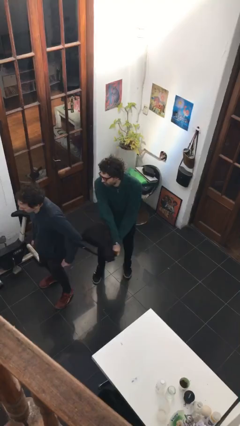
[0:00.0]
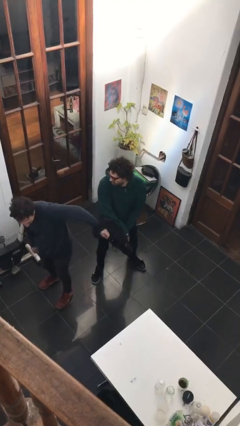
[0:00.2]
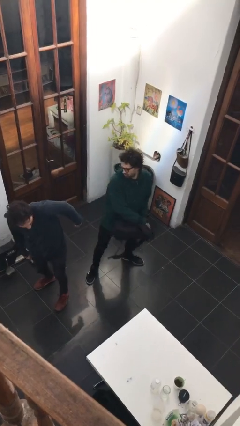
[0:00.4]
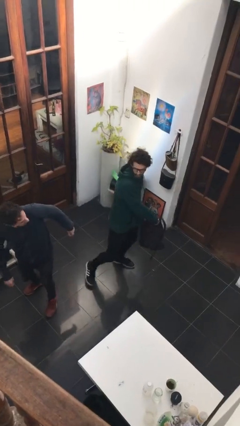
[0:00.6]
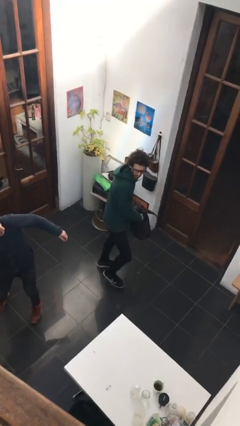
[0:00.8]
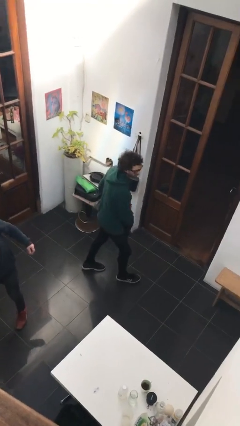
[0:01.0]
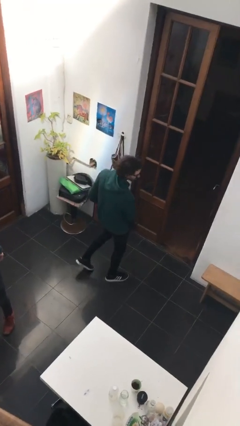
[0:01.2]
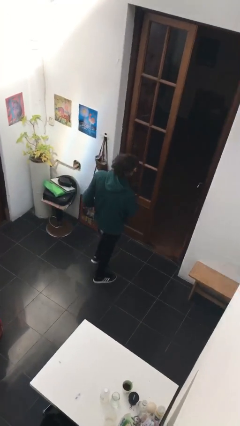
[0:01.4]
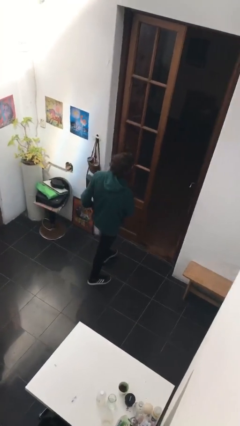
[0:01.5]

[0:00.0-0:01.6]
person steals object from person

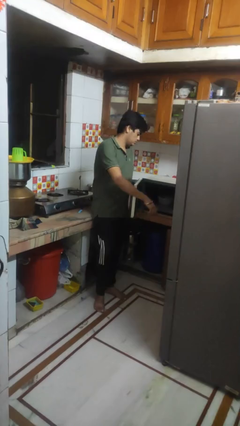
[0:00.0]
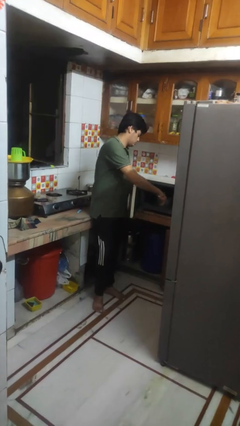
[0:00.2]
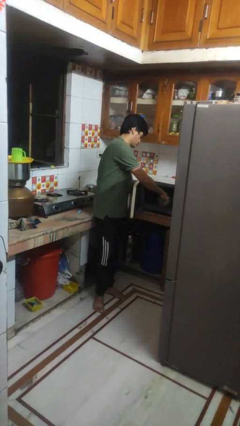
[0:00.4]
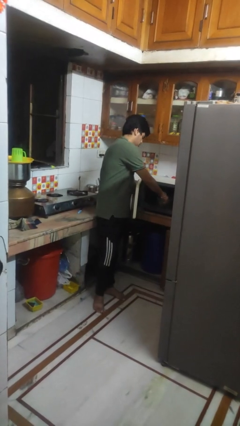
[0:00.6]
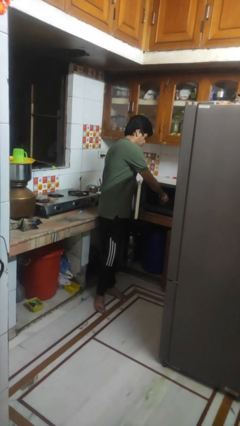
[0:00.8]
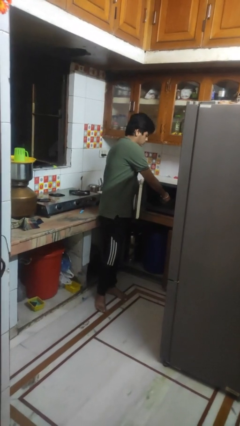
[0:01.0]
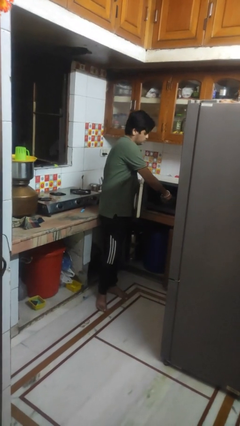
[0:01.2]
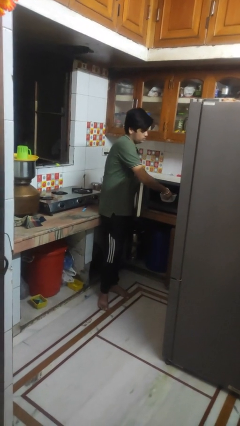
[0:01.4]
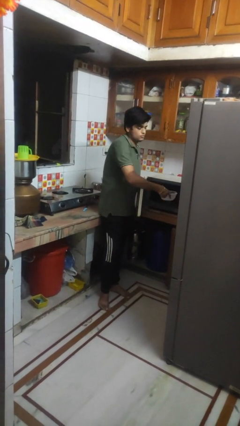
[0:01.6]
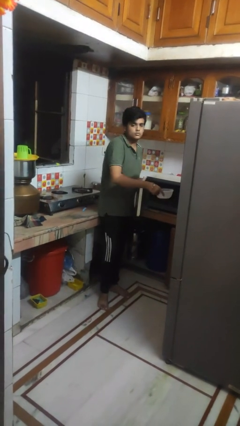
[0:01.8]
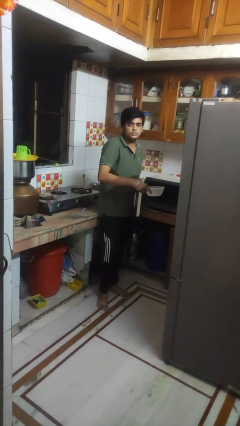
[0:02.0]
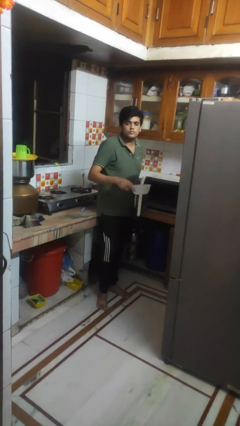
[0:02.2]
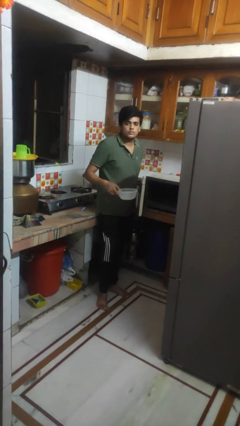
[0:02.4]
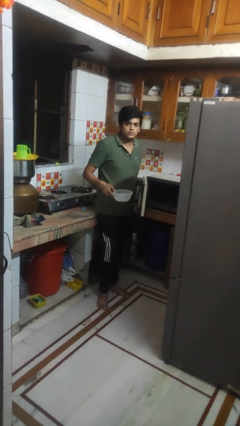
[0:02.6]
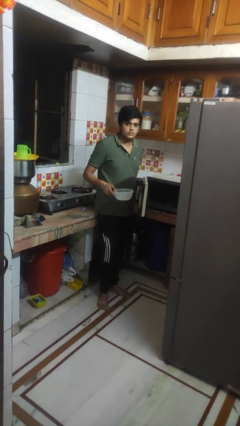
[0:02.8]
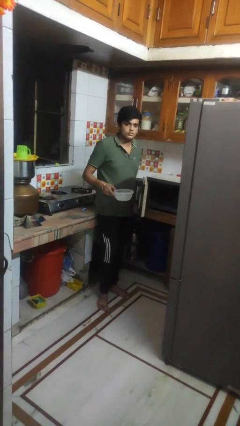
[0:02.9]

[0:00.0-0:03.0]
person takes object from microwave

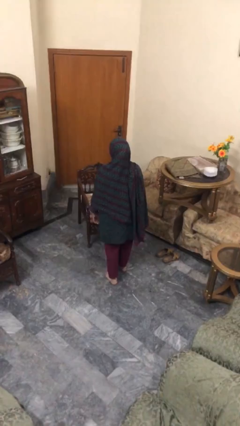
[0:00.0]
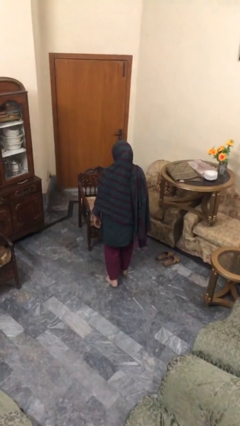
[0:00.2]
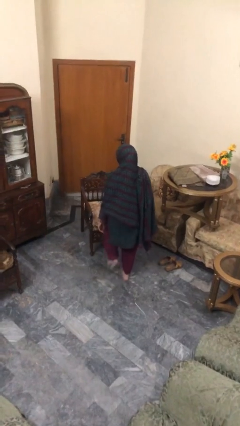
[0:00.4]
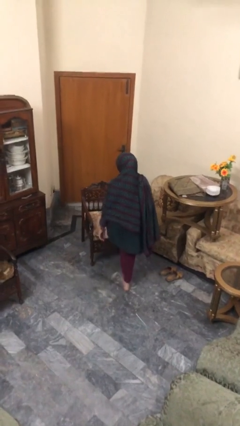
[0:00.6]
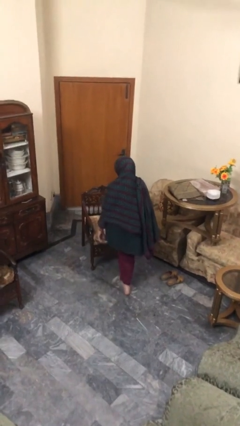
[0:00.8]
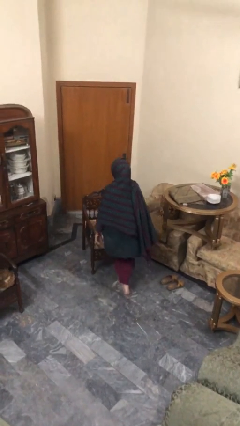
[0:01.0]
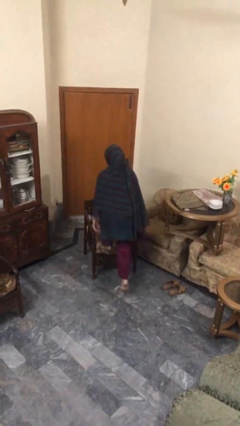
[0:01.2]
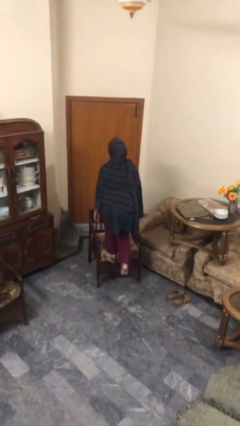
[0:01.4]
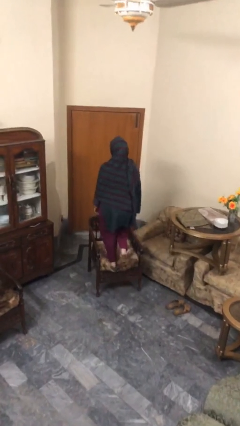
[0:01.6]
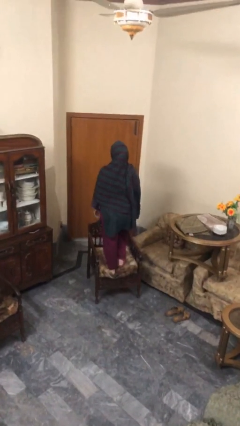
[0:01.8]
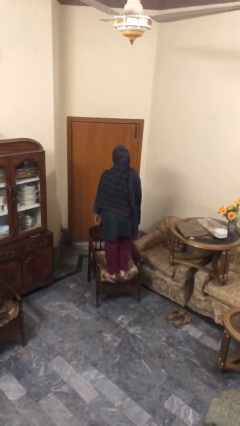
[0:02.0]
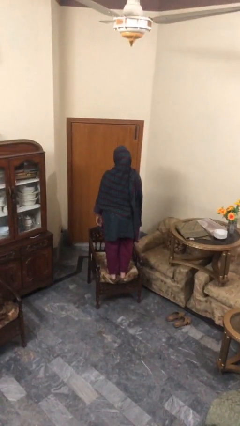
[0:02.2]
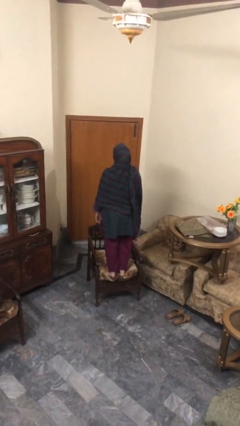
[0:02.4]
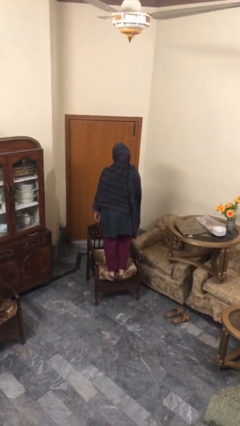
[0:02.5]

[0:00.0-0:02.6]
person climbs on chair

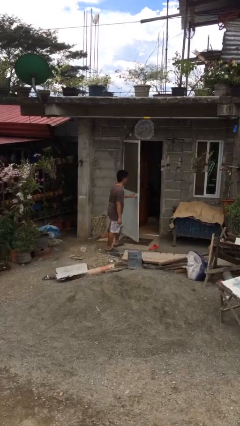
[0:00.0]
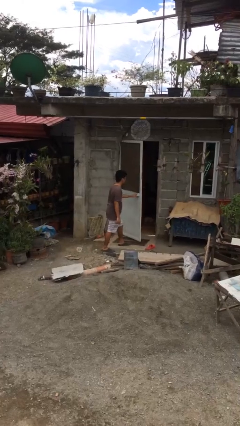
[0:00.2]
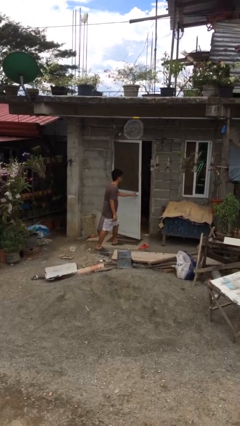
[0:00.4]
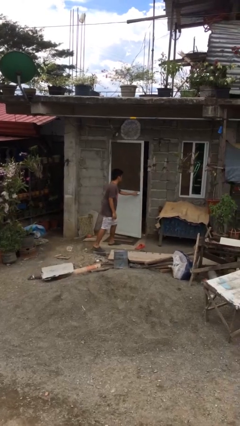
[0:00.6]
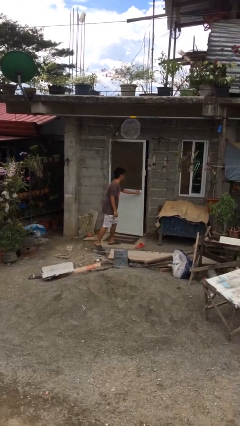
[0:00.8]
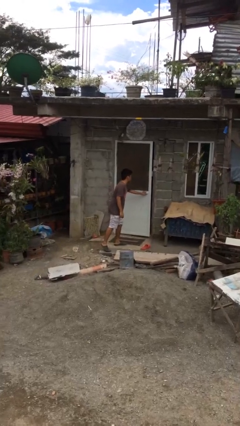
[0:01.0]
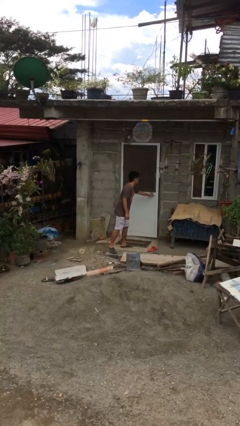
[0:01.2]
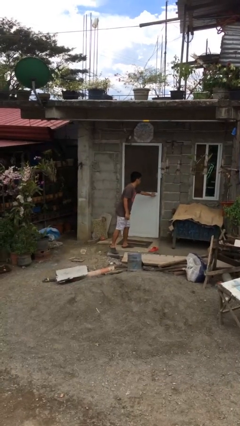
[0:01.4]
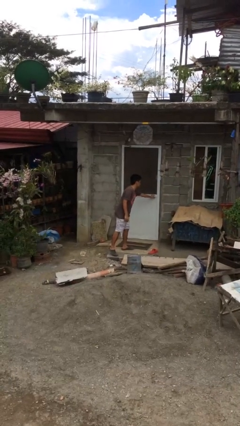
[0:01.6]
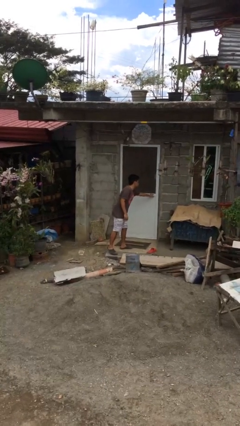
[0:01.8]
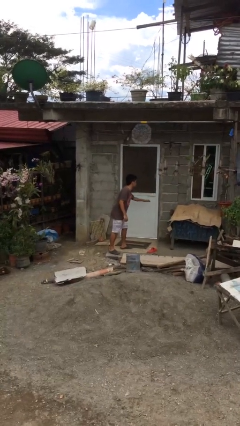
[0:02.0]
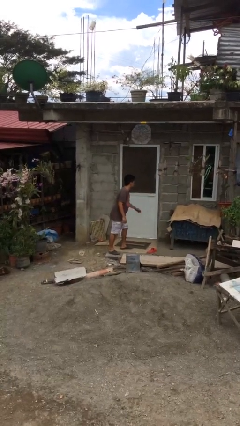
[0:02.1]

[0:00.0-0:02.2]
person closes facility door

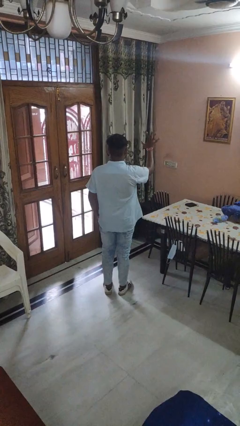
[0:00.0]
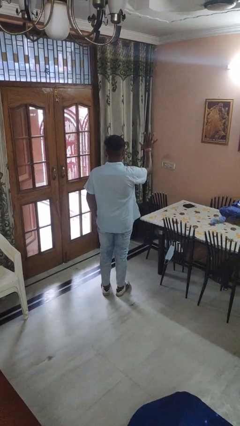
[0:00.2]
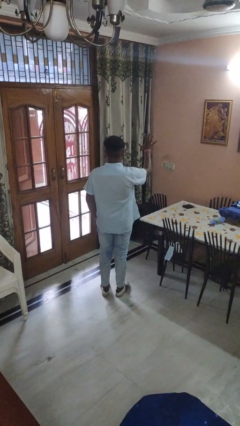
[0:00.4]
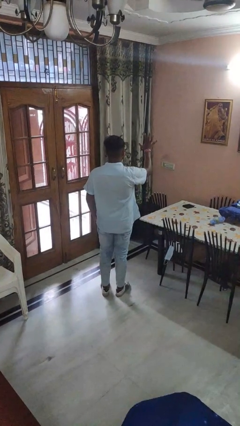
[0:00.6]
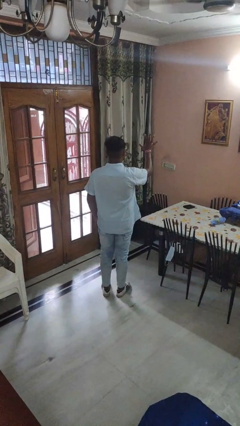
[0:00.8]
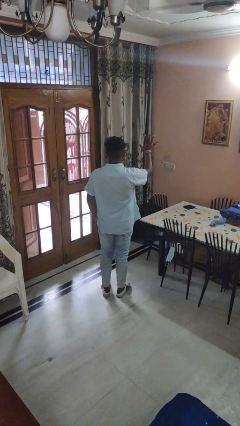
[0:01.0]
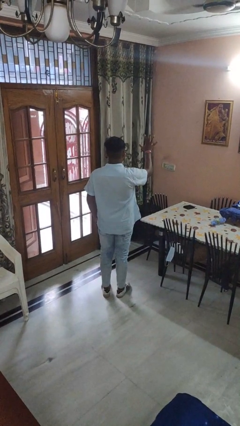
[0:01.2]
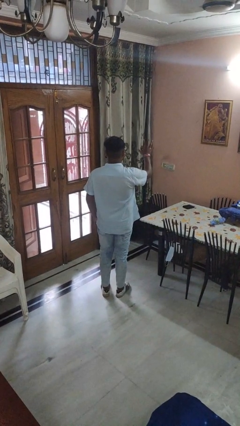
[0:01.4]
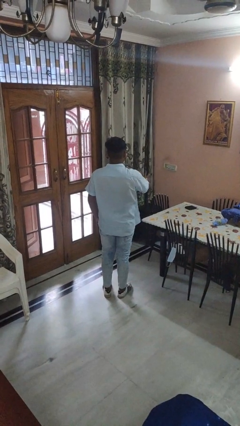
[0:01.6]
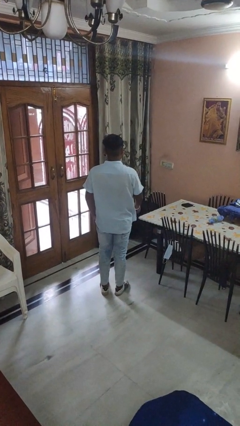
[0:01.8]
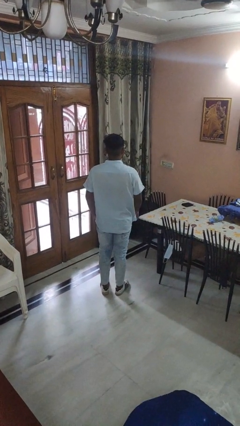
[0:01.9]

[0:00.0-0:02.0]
person gestures number five

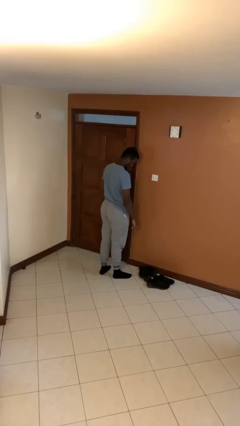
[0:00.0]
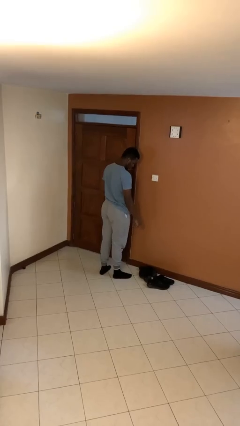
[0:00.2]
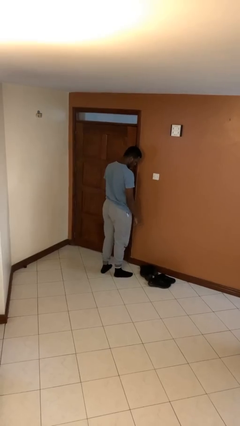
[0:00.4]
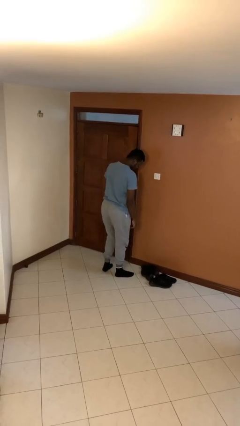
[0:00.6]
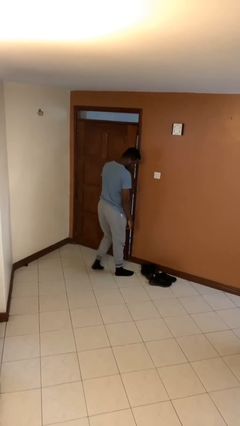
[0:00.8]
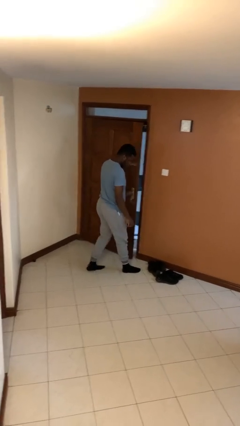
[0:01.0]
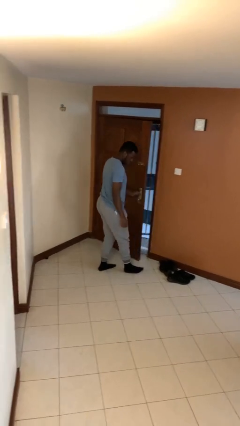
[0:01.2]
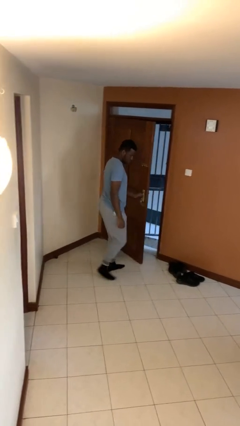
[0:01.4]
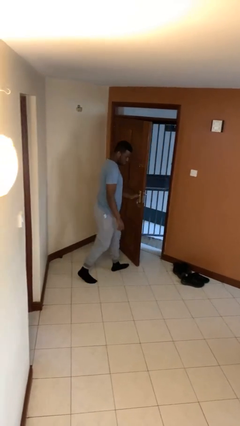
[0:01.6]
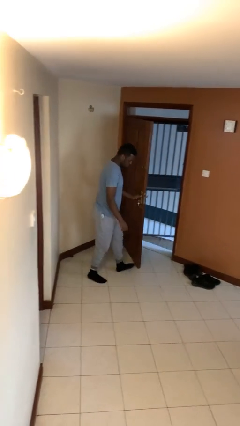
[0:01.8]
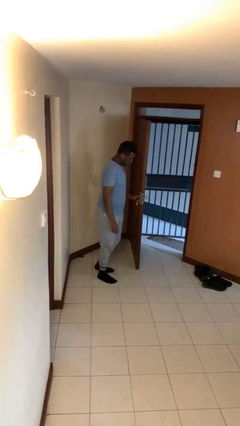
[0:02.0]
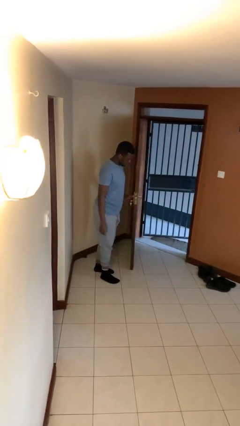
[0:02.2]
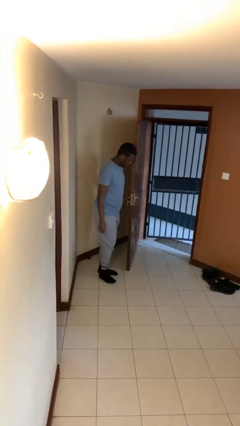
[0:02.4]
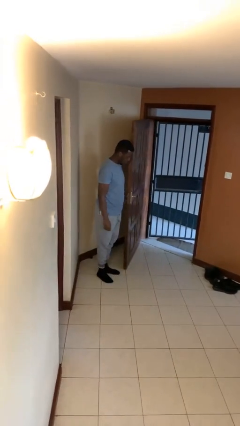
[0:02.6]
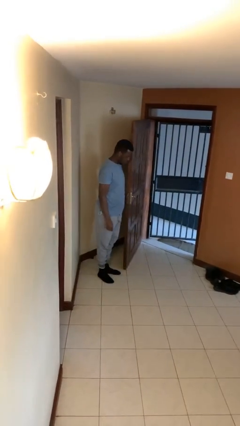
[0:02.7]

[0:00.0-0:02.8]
person opens facility door

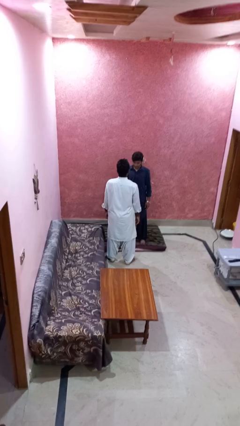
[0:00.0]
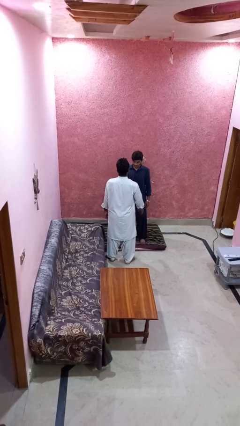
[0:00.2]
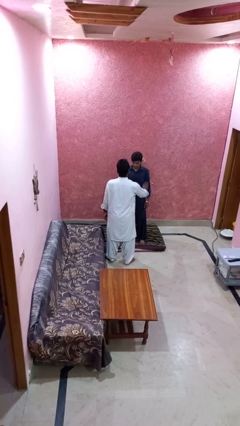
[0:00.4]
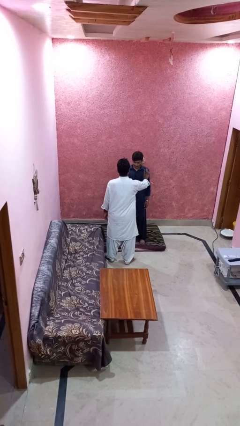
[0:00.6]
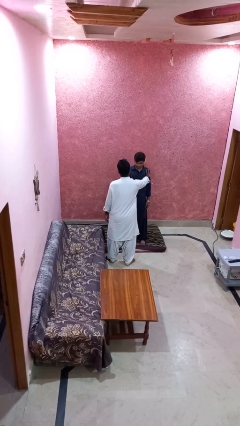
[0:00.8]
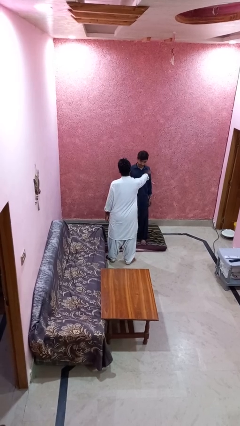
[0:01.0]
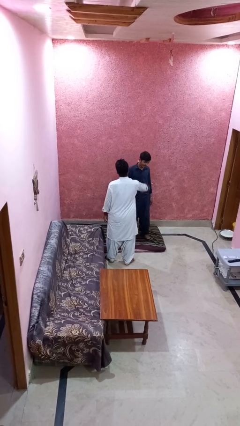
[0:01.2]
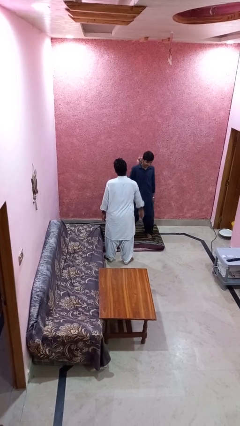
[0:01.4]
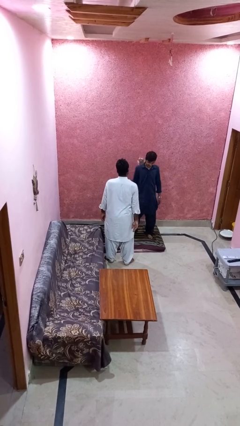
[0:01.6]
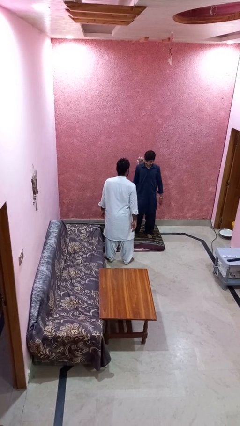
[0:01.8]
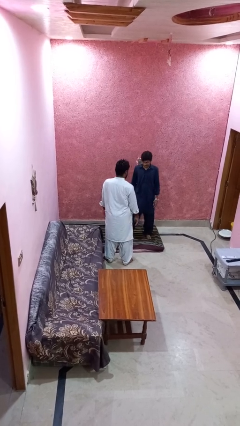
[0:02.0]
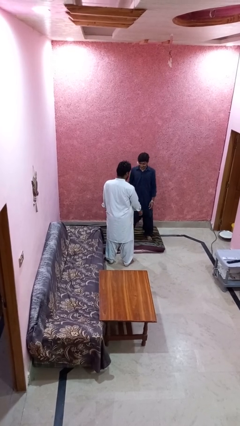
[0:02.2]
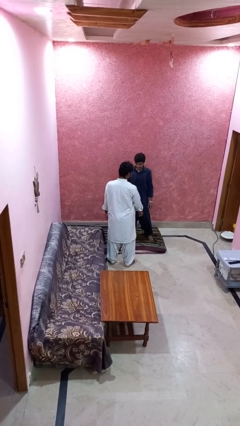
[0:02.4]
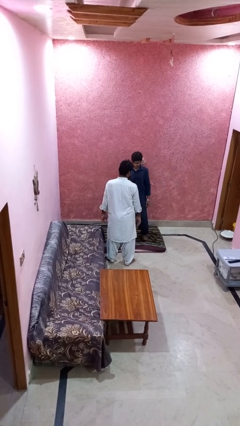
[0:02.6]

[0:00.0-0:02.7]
person shoves person

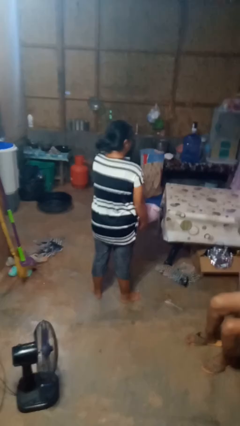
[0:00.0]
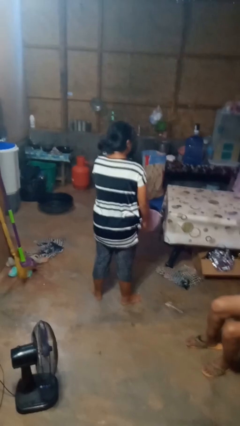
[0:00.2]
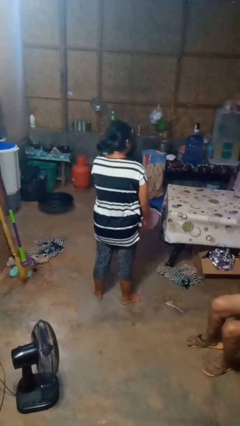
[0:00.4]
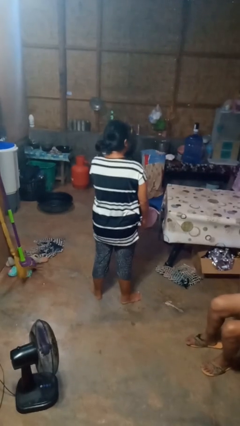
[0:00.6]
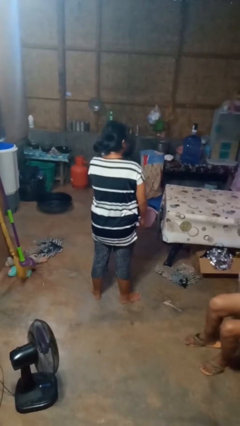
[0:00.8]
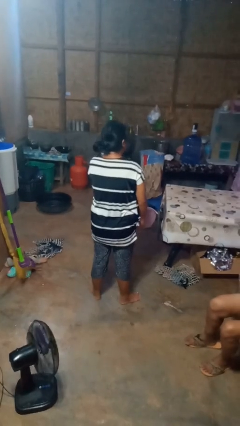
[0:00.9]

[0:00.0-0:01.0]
person catches dropped object
